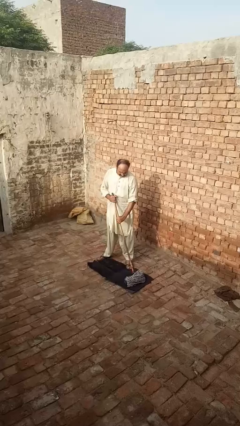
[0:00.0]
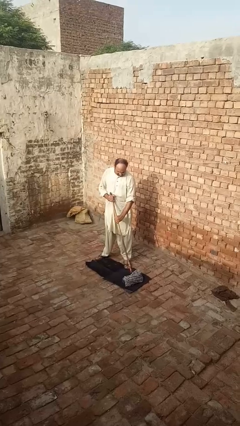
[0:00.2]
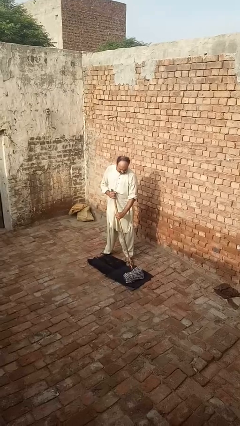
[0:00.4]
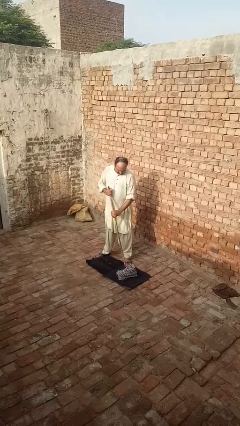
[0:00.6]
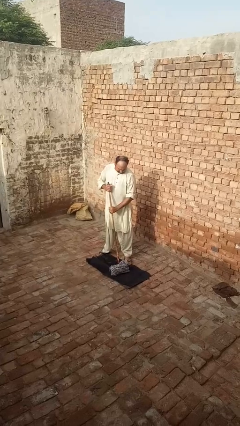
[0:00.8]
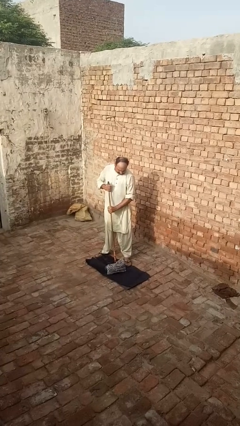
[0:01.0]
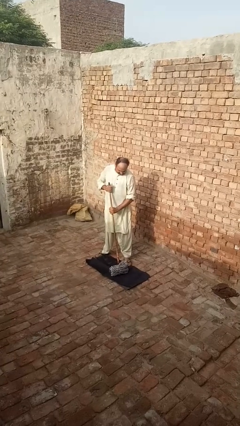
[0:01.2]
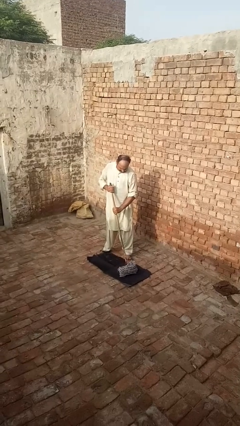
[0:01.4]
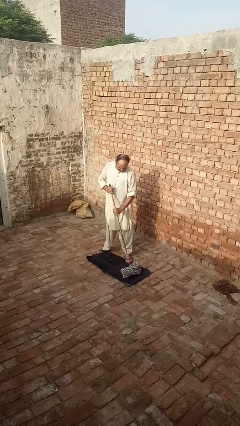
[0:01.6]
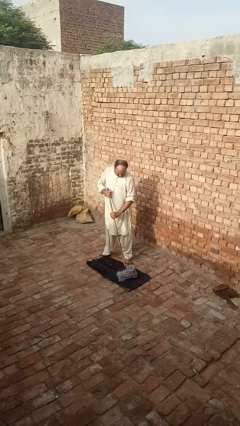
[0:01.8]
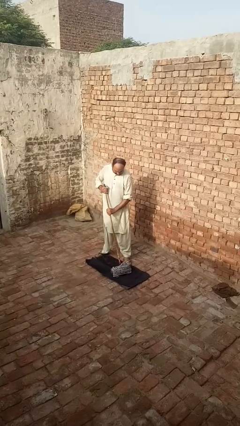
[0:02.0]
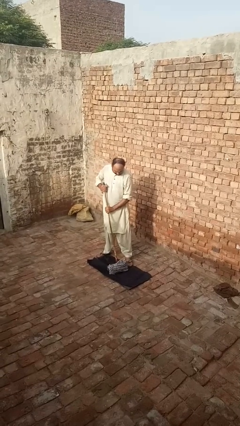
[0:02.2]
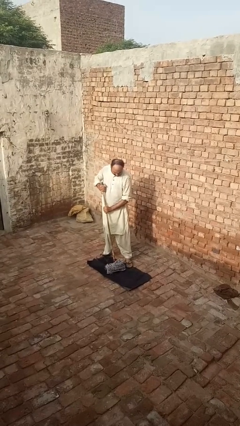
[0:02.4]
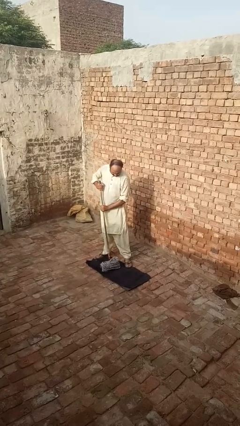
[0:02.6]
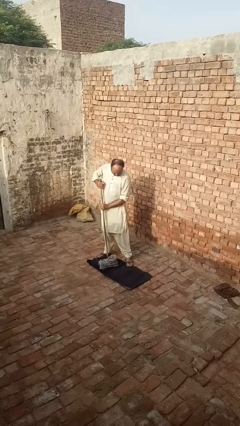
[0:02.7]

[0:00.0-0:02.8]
person vacuums carpet

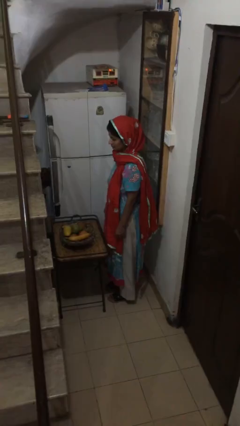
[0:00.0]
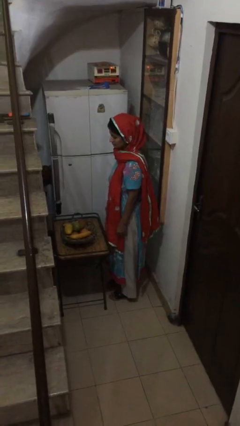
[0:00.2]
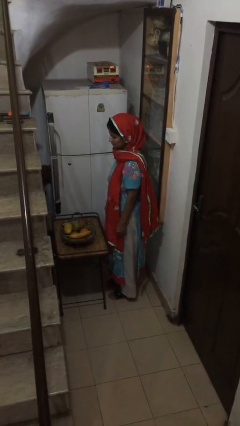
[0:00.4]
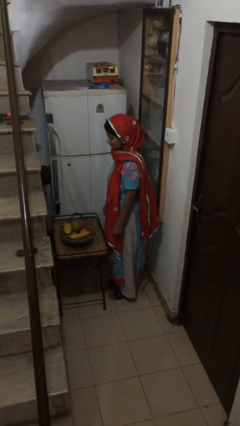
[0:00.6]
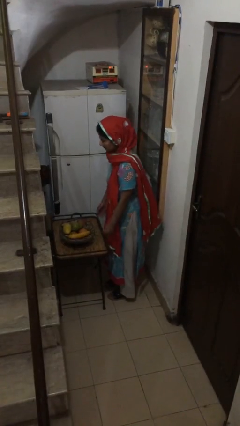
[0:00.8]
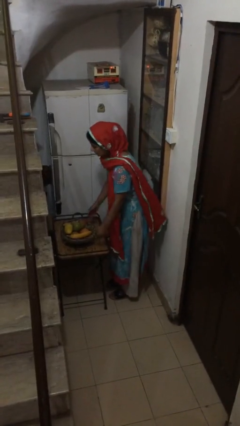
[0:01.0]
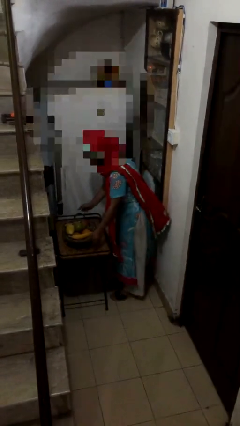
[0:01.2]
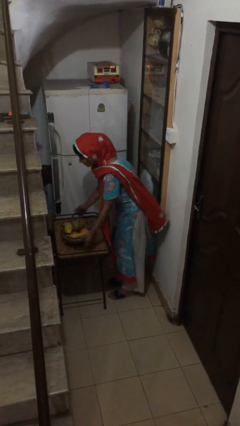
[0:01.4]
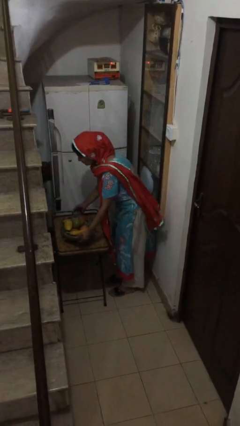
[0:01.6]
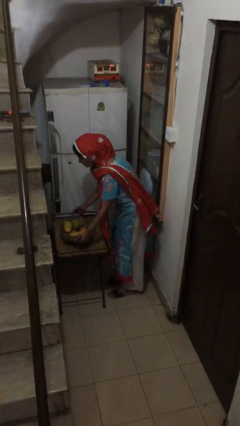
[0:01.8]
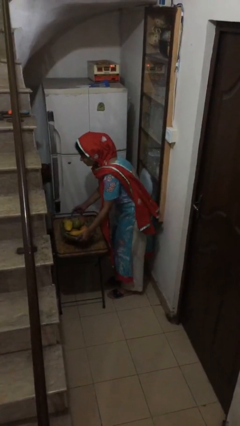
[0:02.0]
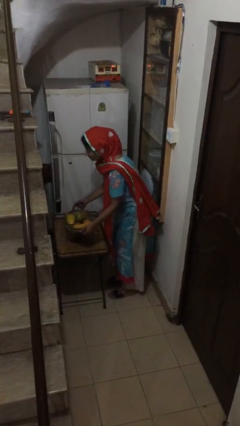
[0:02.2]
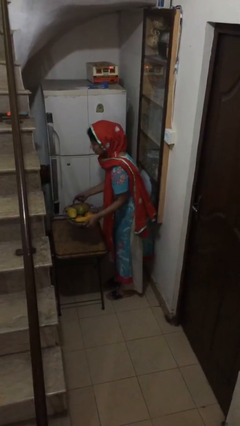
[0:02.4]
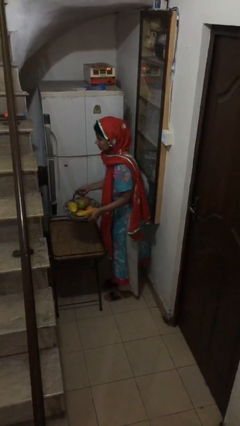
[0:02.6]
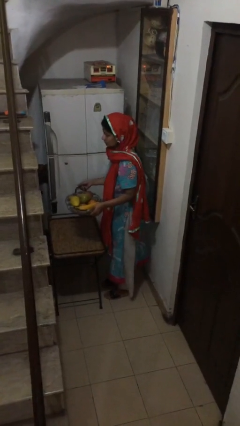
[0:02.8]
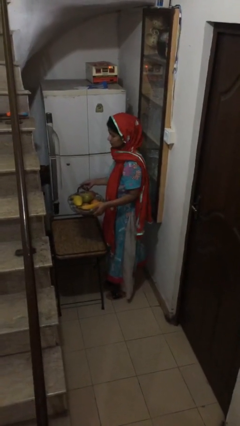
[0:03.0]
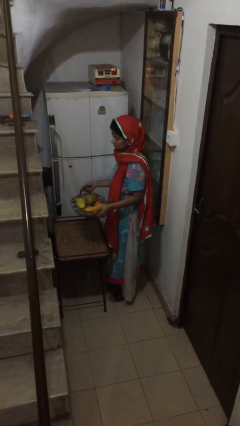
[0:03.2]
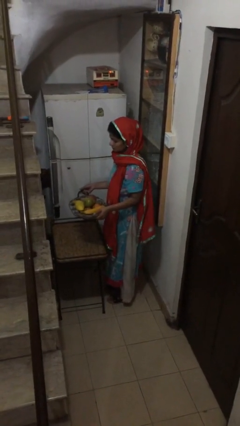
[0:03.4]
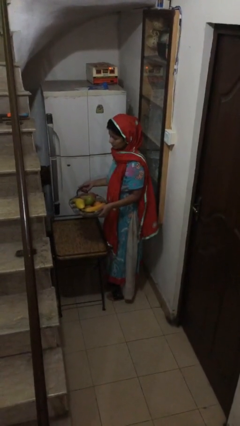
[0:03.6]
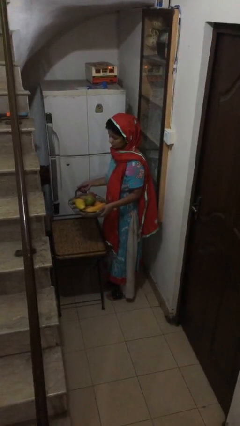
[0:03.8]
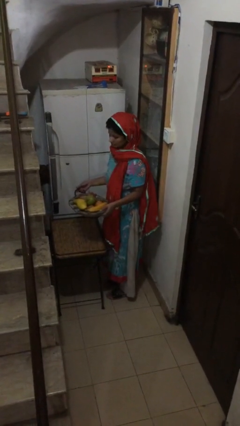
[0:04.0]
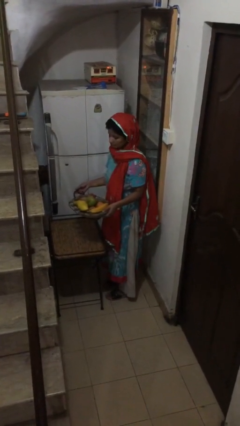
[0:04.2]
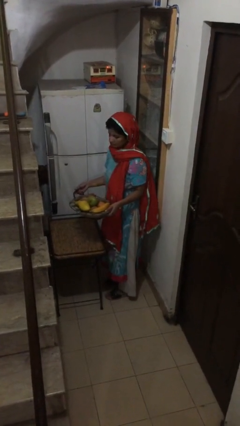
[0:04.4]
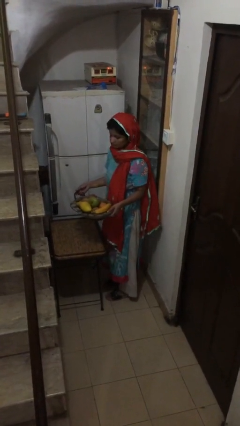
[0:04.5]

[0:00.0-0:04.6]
person picks up object from table

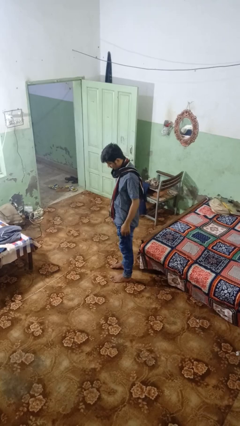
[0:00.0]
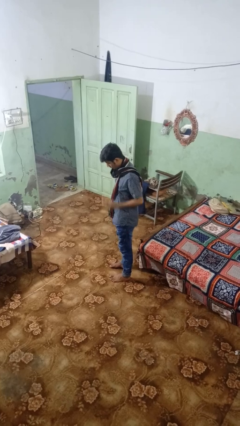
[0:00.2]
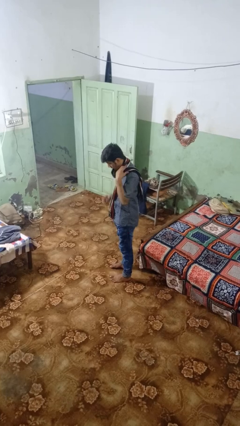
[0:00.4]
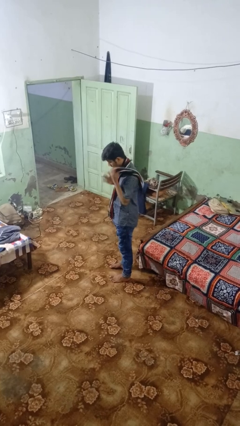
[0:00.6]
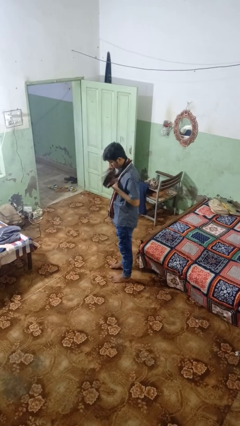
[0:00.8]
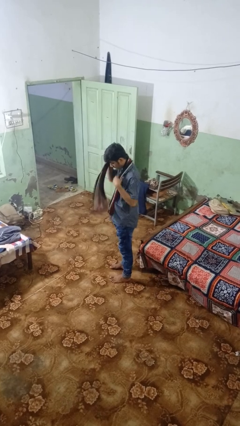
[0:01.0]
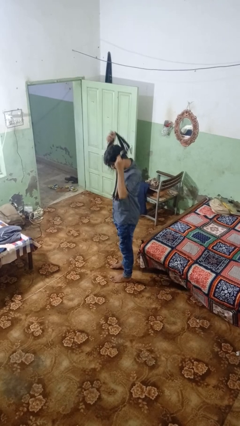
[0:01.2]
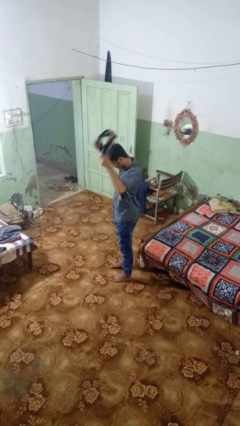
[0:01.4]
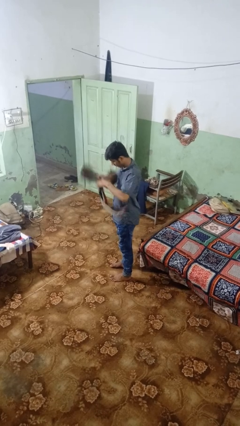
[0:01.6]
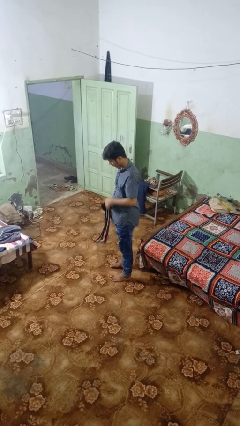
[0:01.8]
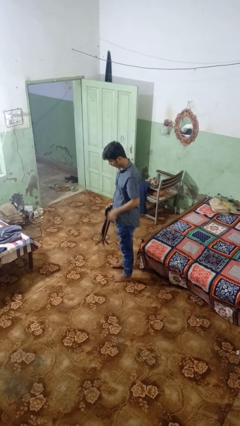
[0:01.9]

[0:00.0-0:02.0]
person takes off scarf

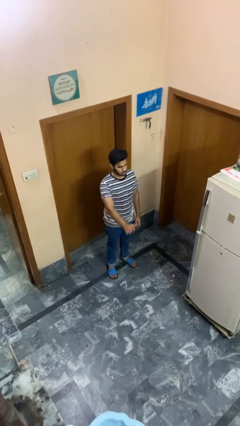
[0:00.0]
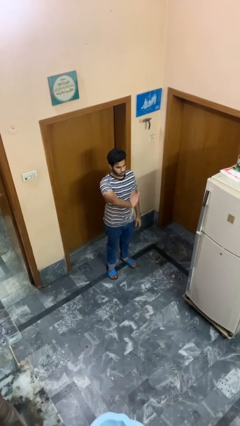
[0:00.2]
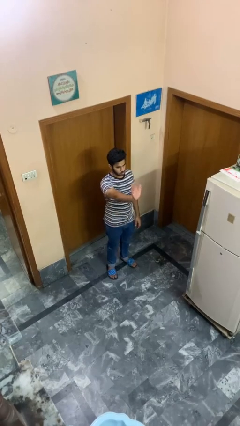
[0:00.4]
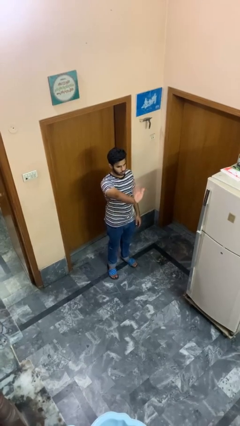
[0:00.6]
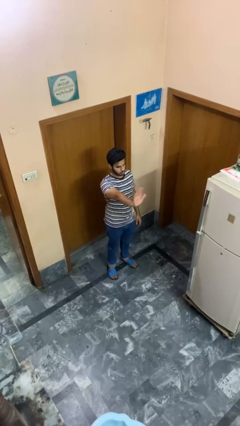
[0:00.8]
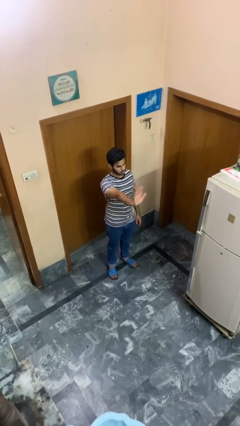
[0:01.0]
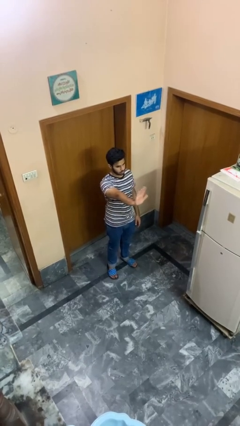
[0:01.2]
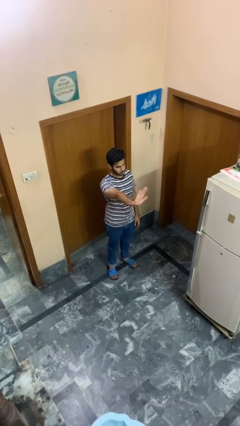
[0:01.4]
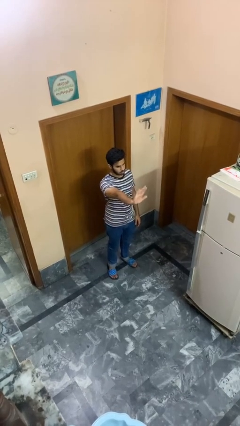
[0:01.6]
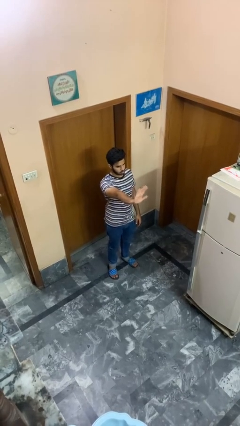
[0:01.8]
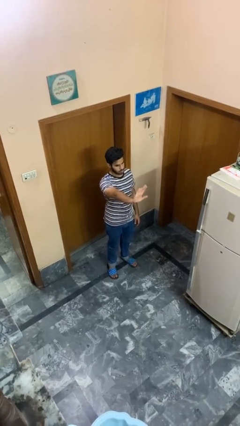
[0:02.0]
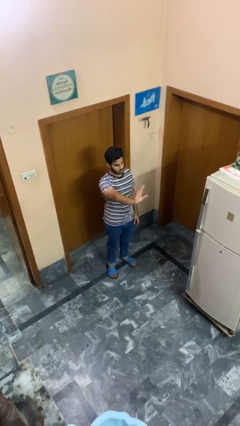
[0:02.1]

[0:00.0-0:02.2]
person waves at person

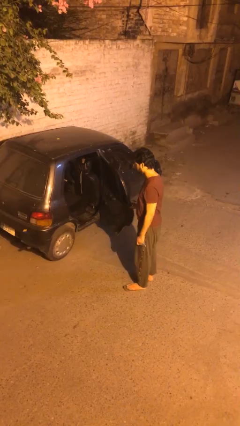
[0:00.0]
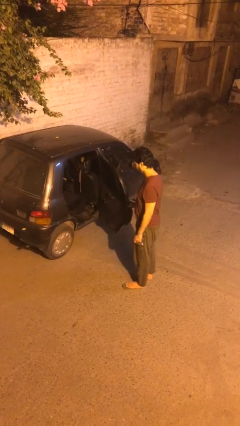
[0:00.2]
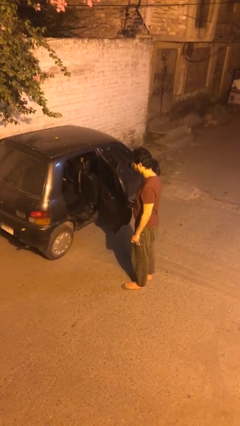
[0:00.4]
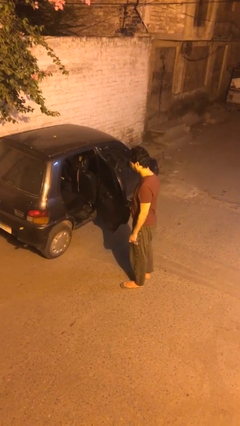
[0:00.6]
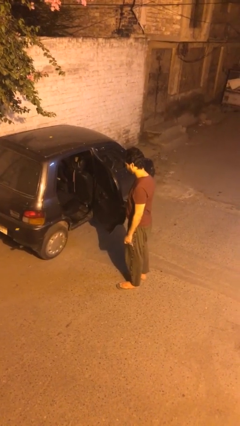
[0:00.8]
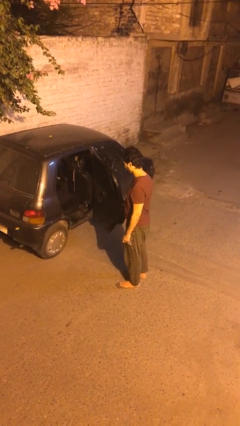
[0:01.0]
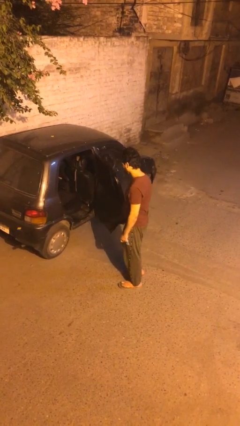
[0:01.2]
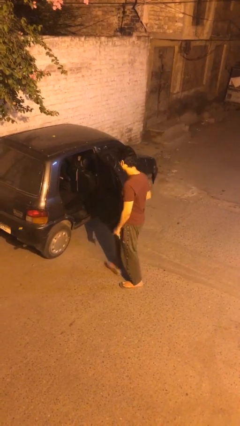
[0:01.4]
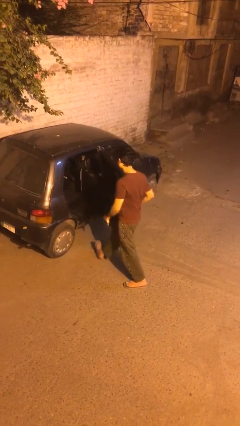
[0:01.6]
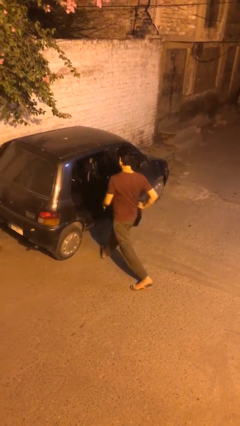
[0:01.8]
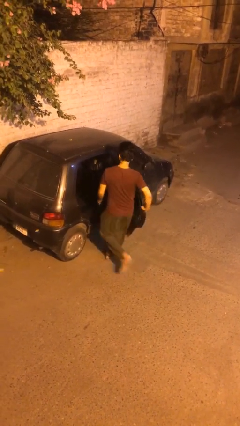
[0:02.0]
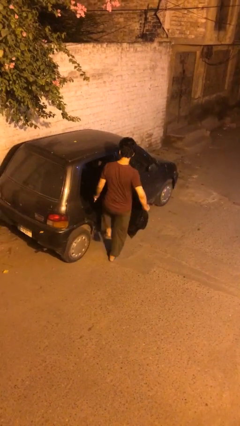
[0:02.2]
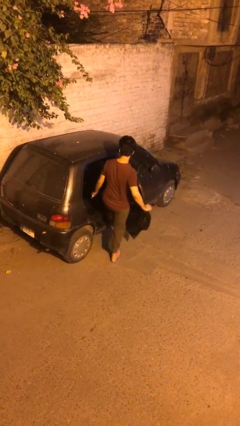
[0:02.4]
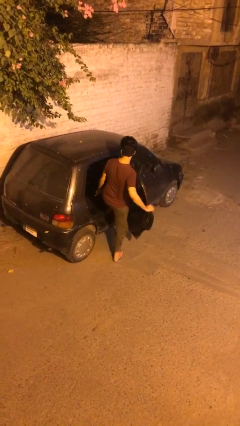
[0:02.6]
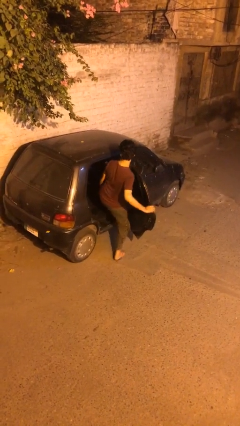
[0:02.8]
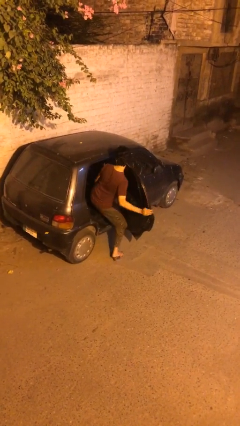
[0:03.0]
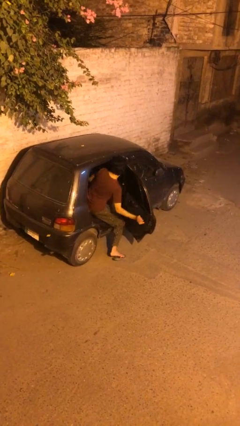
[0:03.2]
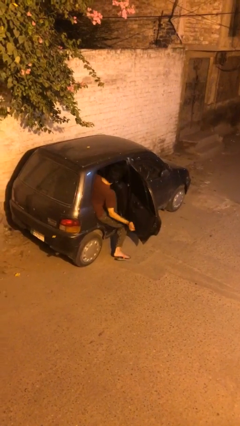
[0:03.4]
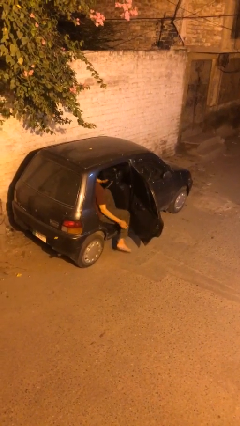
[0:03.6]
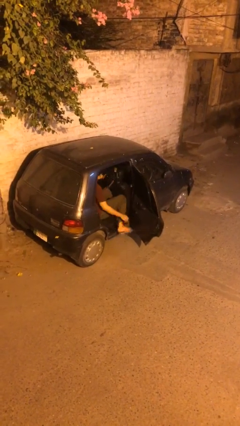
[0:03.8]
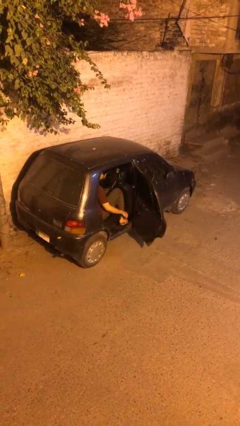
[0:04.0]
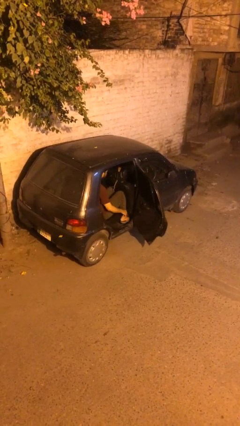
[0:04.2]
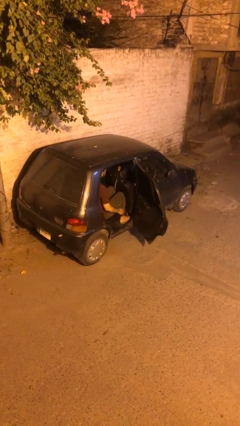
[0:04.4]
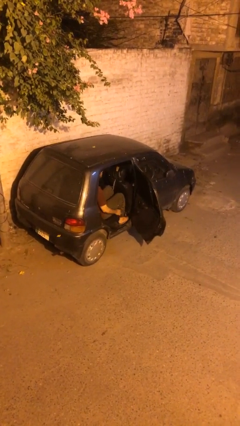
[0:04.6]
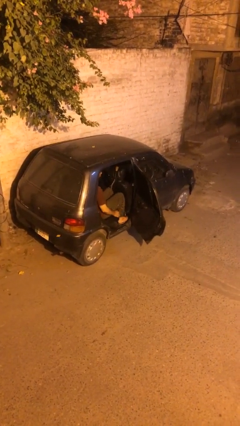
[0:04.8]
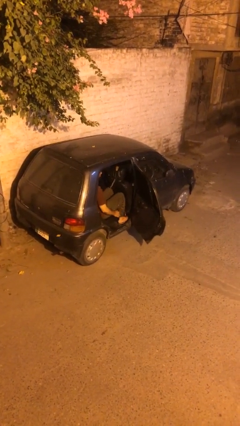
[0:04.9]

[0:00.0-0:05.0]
person enters car

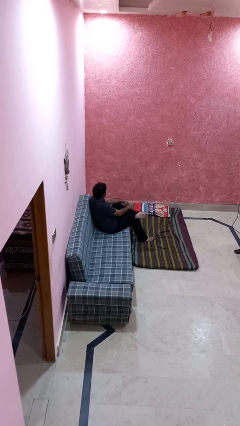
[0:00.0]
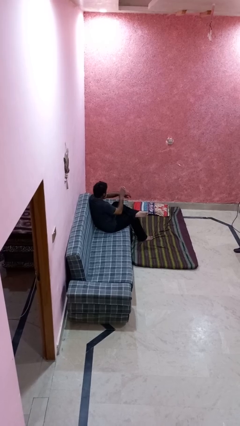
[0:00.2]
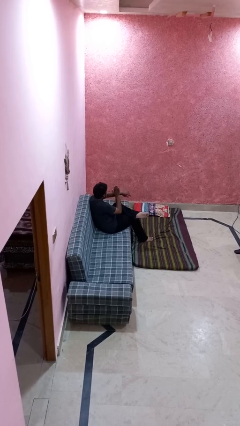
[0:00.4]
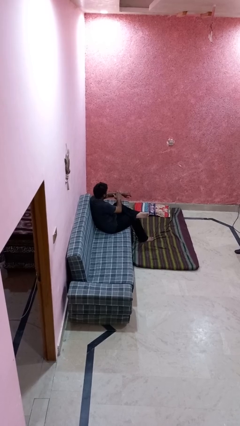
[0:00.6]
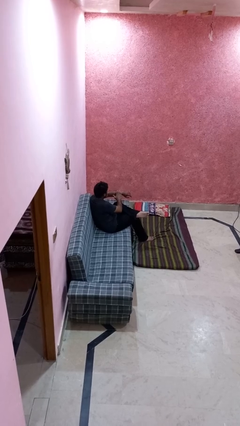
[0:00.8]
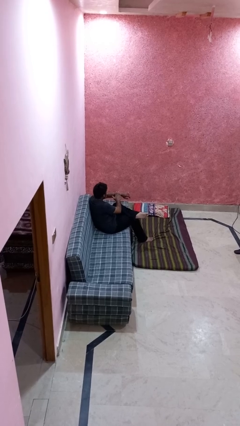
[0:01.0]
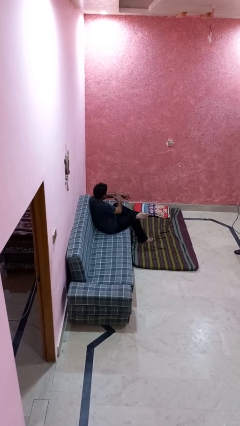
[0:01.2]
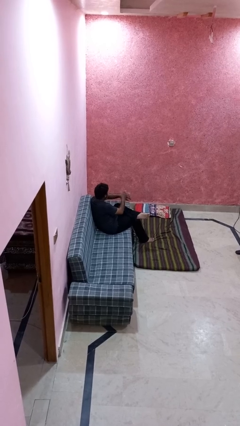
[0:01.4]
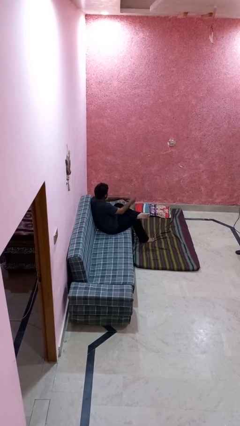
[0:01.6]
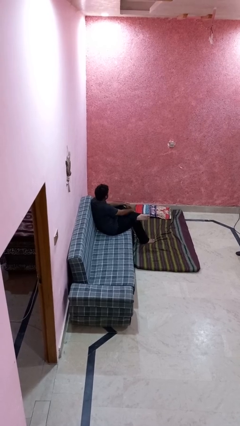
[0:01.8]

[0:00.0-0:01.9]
person swats bug
